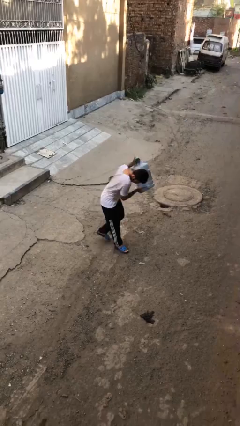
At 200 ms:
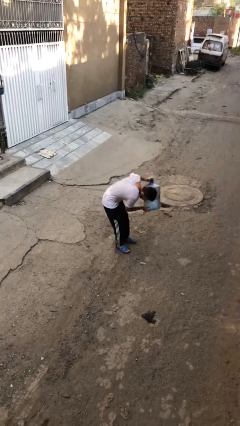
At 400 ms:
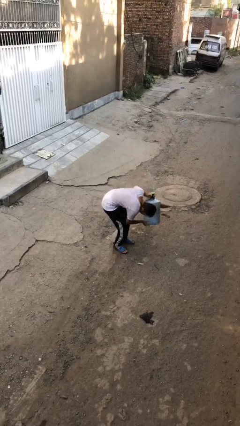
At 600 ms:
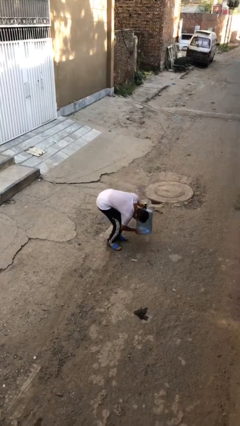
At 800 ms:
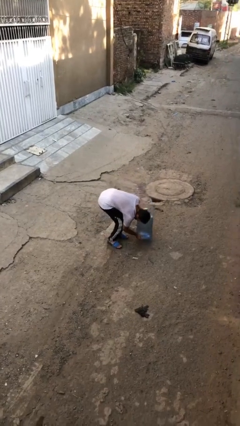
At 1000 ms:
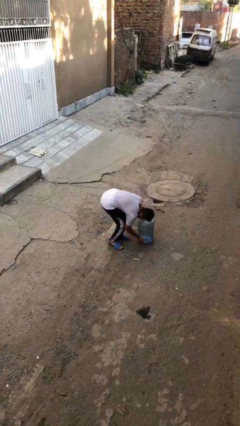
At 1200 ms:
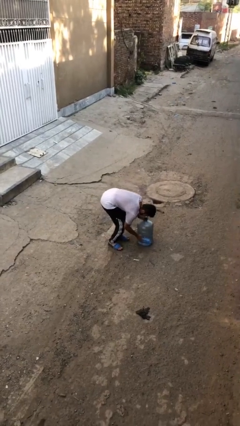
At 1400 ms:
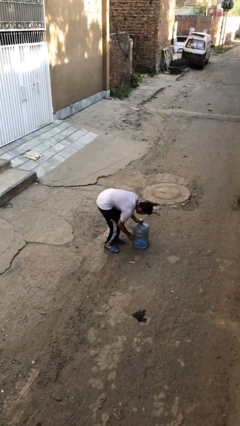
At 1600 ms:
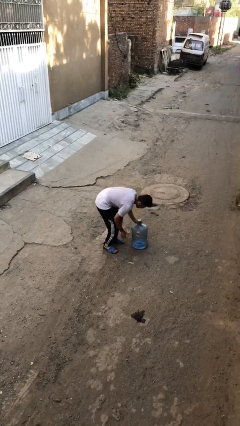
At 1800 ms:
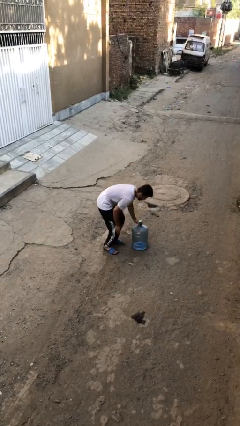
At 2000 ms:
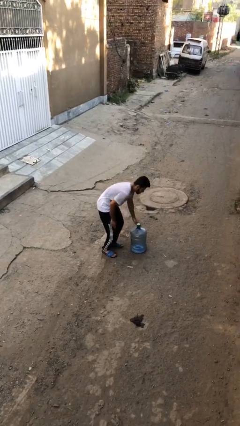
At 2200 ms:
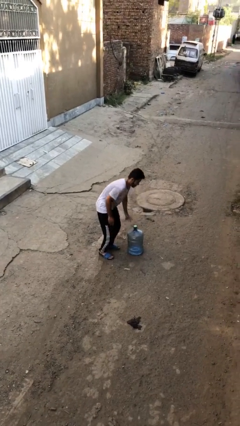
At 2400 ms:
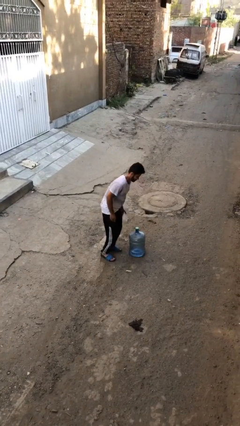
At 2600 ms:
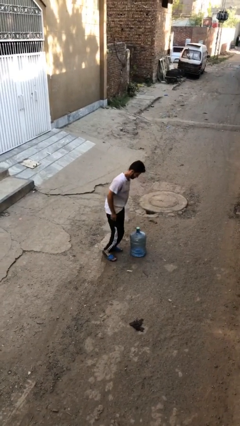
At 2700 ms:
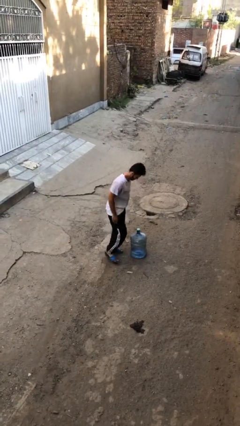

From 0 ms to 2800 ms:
person puts down object on floor

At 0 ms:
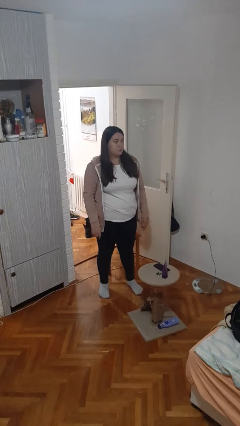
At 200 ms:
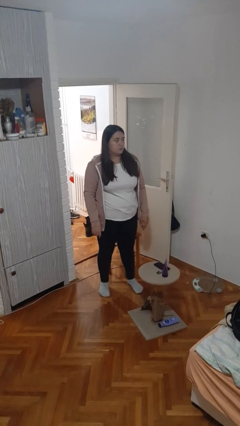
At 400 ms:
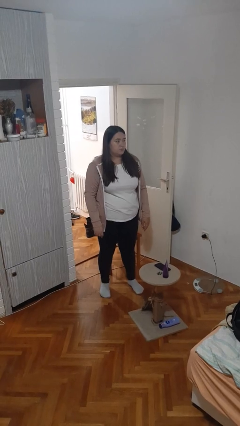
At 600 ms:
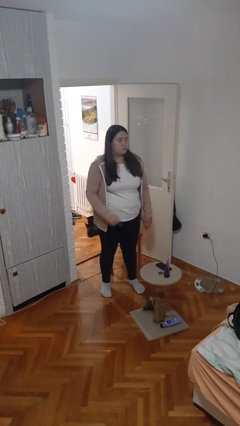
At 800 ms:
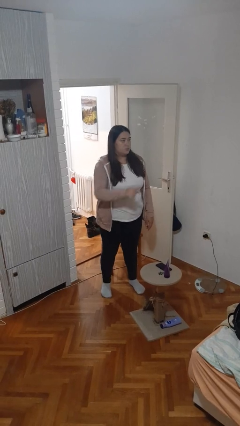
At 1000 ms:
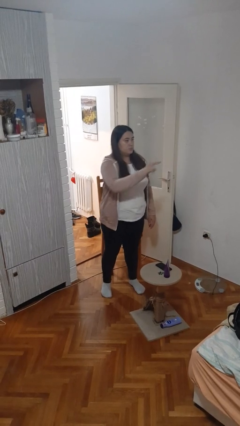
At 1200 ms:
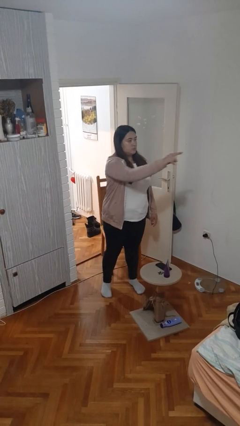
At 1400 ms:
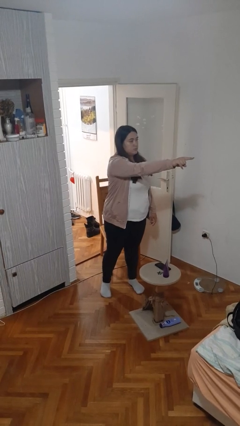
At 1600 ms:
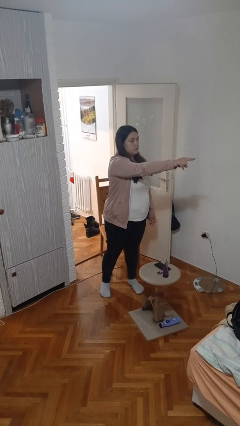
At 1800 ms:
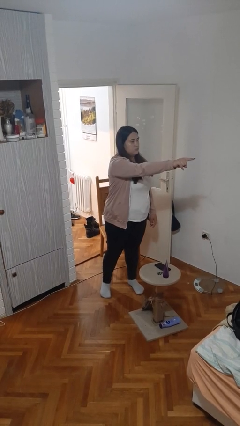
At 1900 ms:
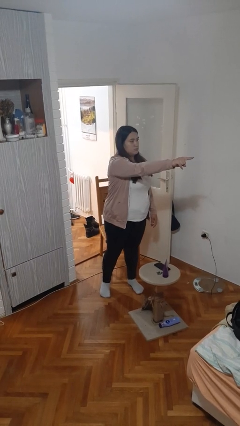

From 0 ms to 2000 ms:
person points at person

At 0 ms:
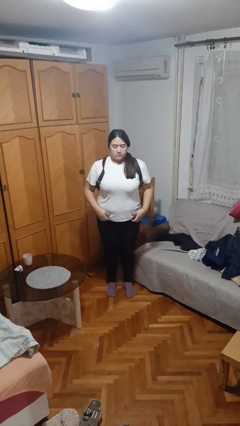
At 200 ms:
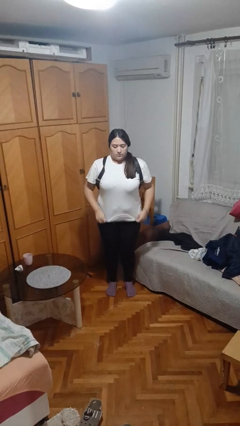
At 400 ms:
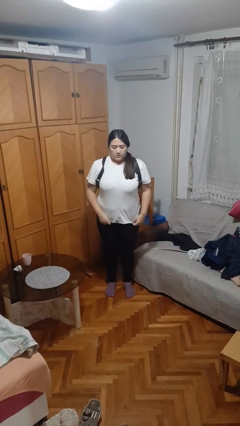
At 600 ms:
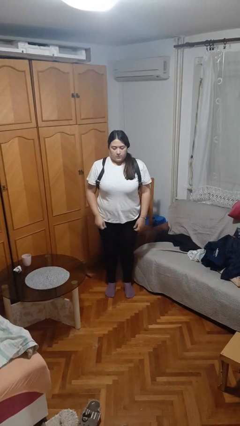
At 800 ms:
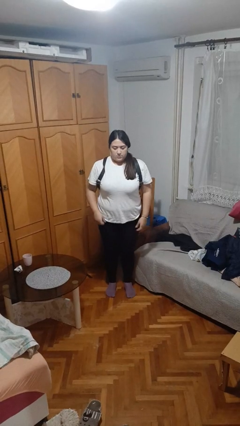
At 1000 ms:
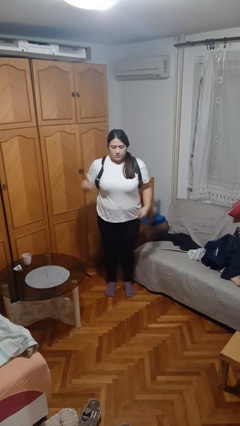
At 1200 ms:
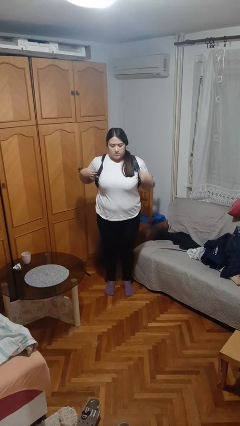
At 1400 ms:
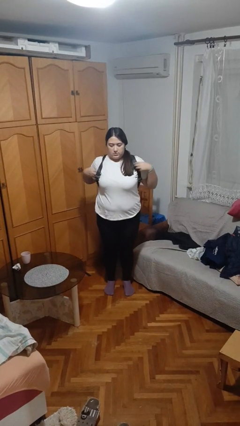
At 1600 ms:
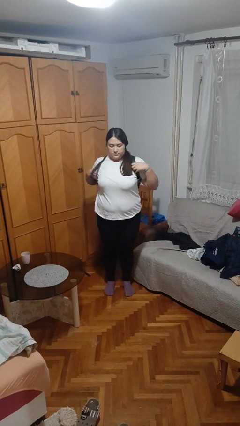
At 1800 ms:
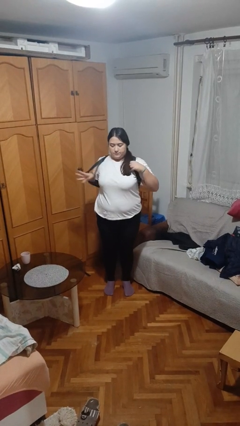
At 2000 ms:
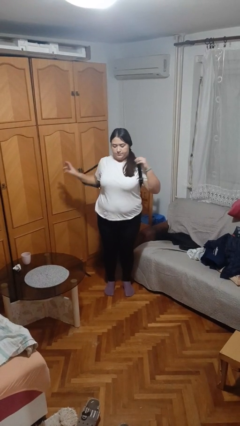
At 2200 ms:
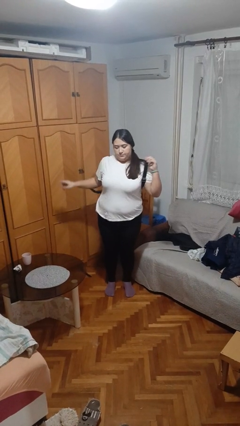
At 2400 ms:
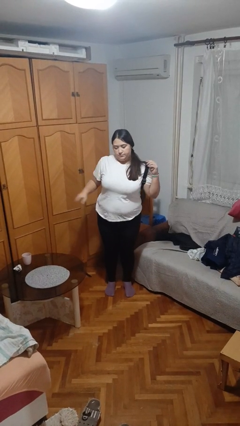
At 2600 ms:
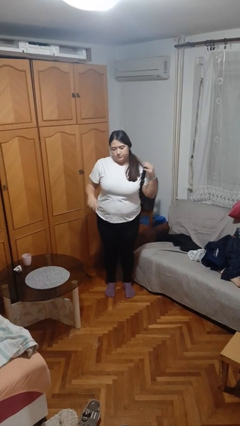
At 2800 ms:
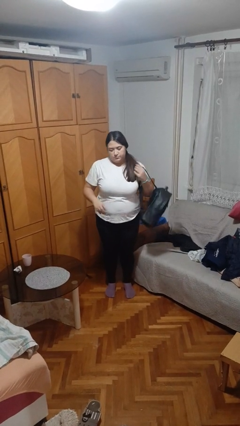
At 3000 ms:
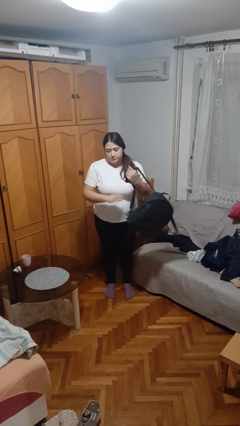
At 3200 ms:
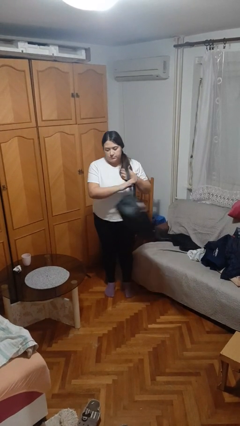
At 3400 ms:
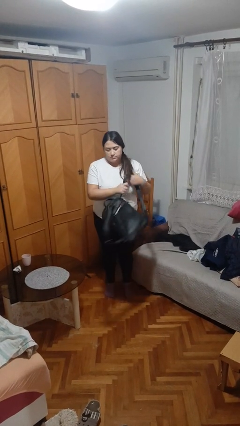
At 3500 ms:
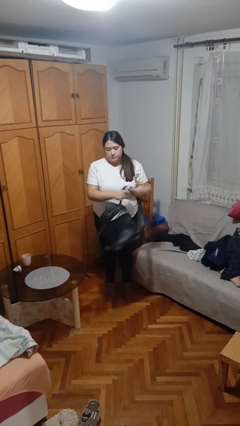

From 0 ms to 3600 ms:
person takes off backpack

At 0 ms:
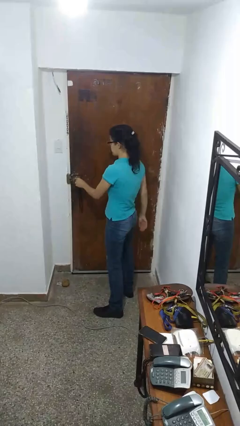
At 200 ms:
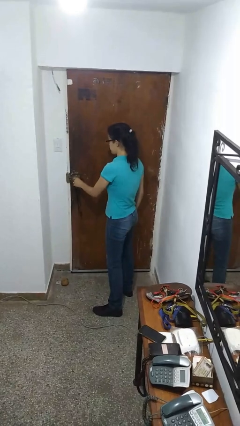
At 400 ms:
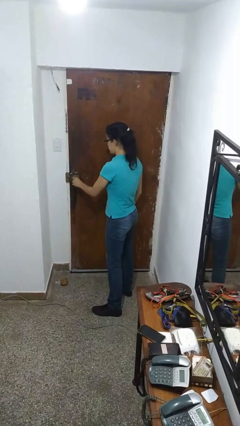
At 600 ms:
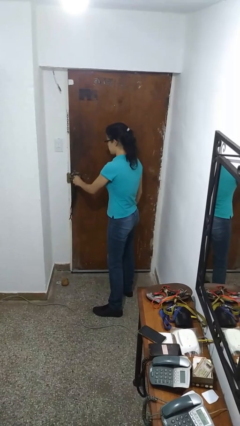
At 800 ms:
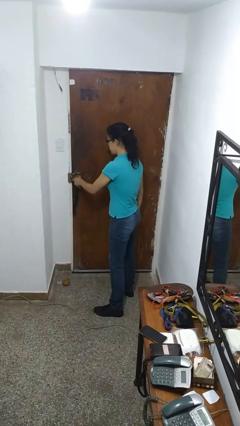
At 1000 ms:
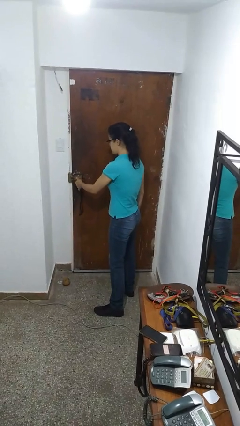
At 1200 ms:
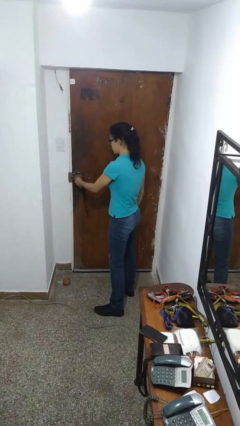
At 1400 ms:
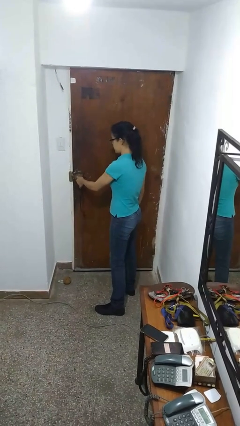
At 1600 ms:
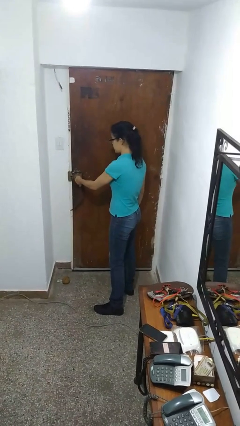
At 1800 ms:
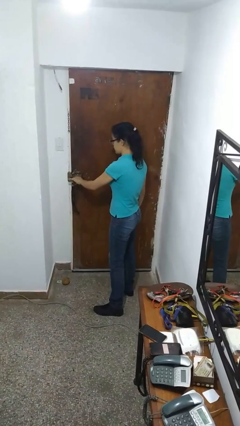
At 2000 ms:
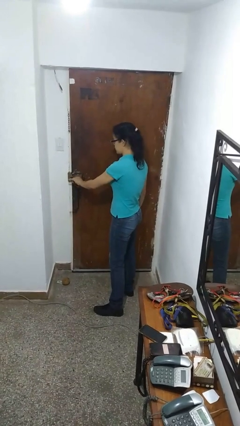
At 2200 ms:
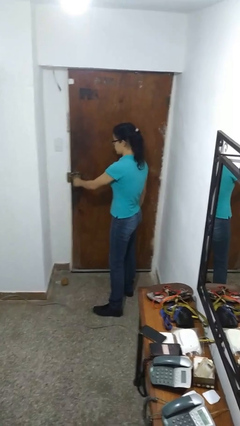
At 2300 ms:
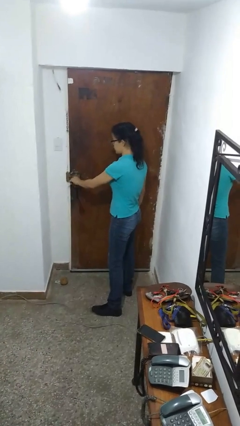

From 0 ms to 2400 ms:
person locks door with keys

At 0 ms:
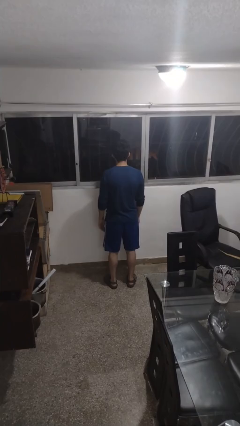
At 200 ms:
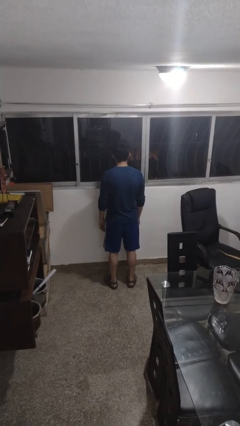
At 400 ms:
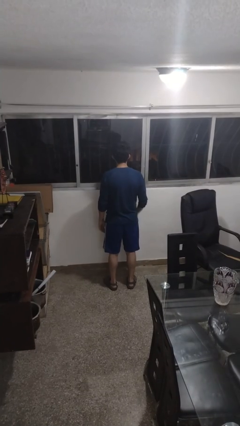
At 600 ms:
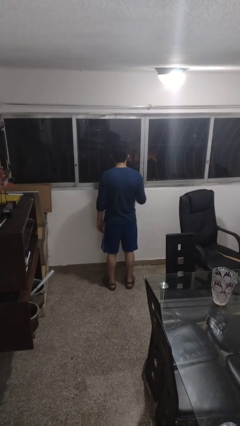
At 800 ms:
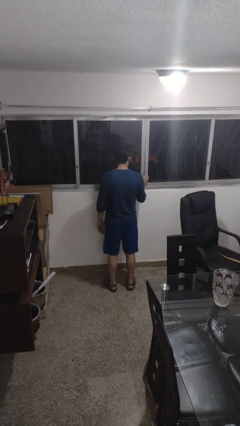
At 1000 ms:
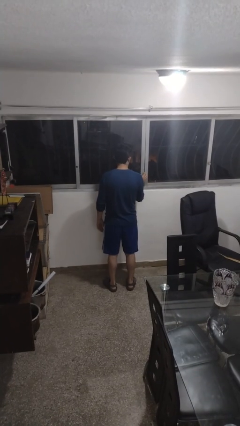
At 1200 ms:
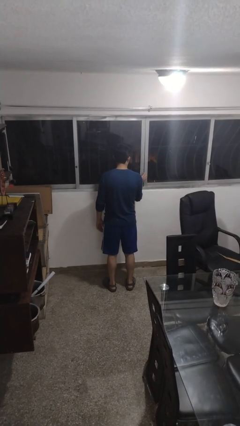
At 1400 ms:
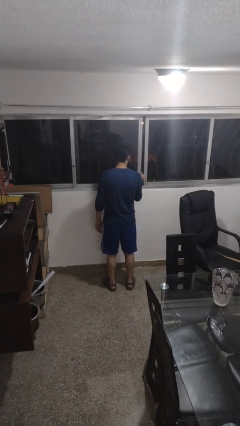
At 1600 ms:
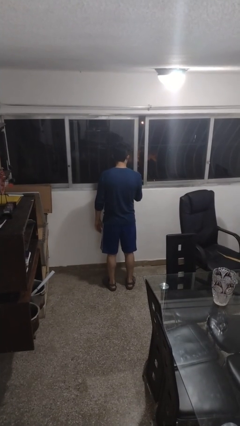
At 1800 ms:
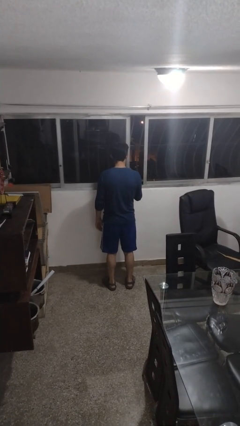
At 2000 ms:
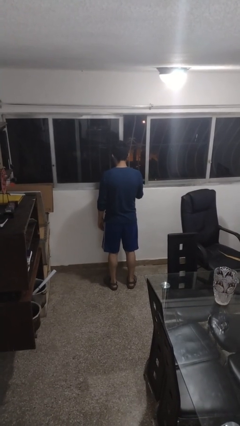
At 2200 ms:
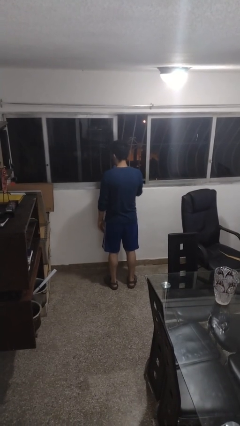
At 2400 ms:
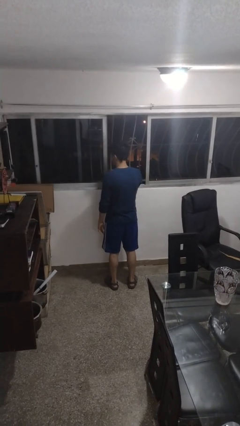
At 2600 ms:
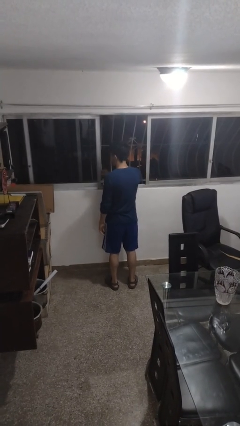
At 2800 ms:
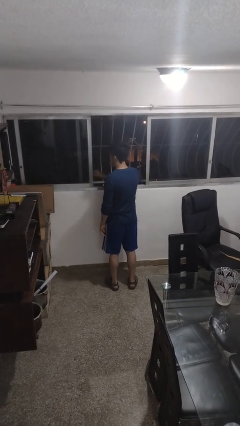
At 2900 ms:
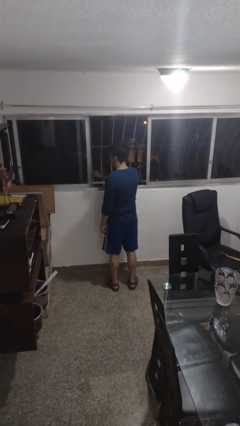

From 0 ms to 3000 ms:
person opens home window

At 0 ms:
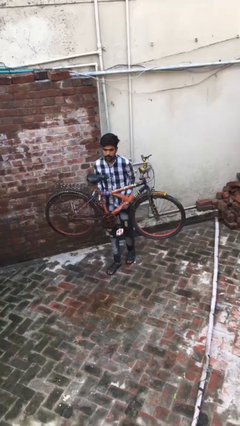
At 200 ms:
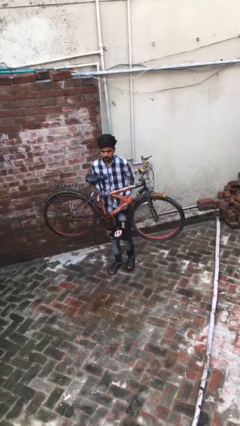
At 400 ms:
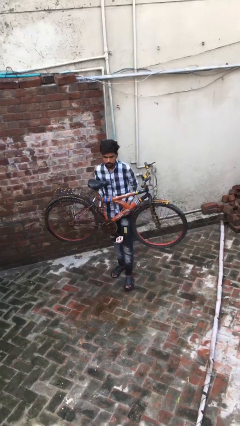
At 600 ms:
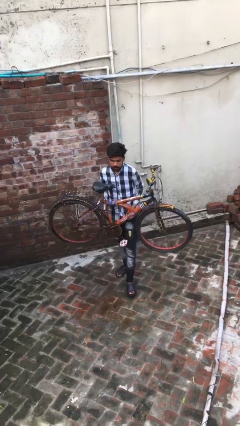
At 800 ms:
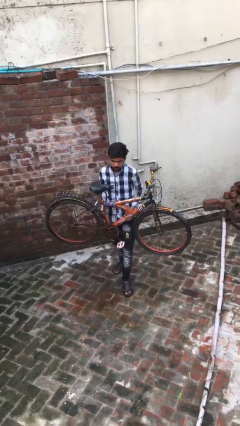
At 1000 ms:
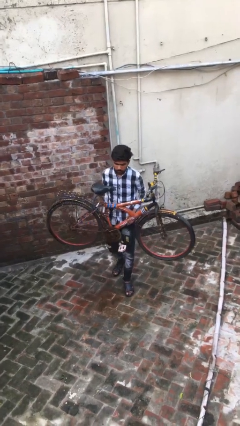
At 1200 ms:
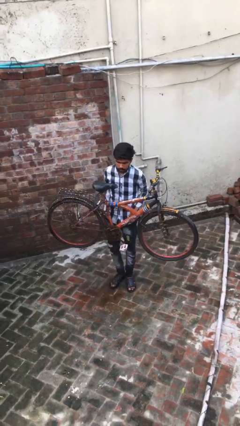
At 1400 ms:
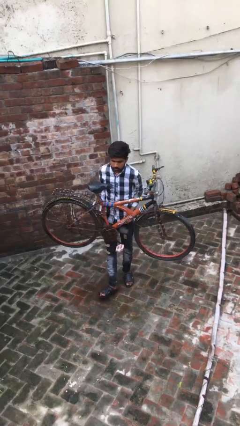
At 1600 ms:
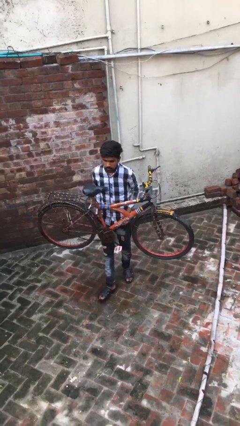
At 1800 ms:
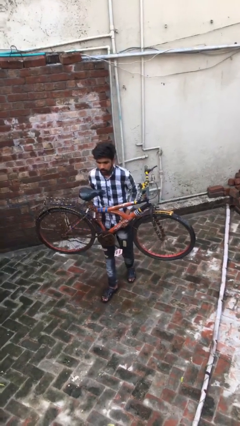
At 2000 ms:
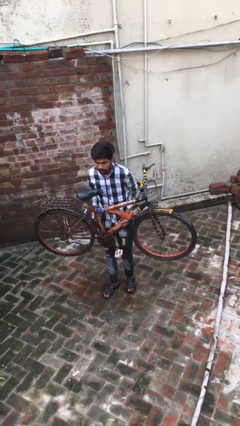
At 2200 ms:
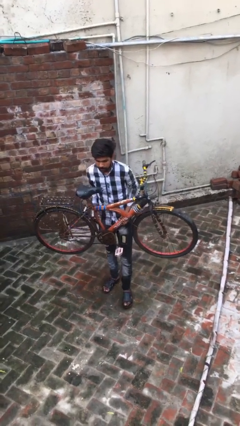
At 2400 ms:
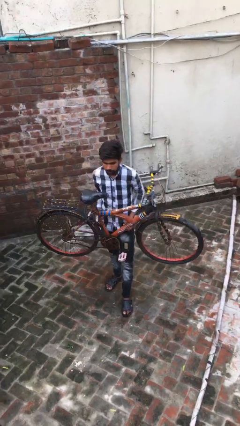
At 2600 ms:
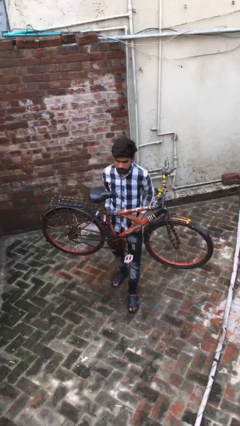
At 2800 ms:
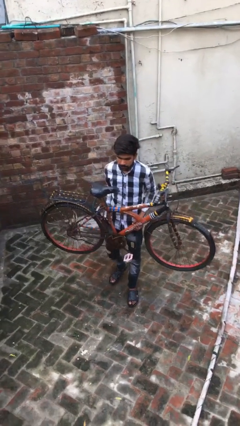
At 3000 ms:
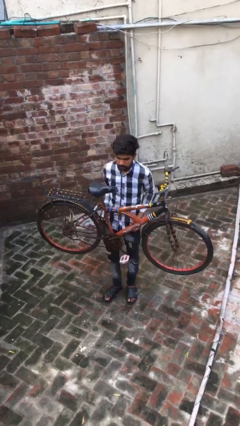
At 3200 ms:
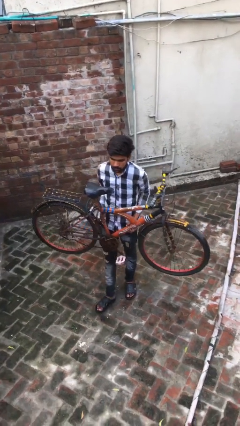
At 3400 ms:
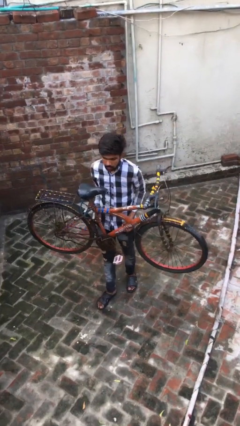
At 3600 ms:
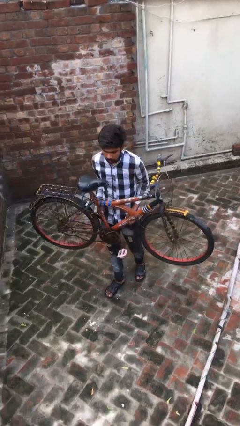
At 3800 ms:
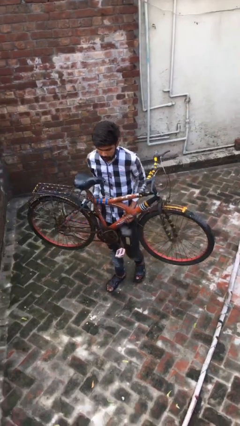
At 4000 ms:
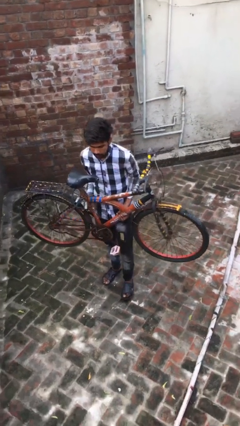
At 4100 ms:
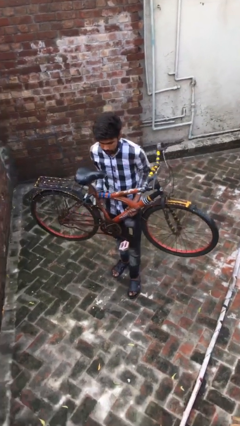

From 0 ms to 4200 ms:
person carries heavy object
